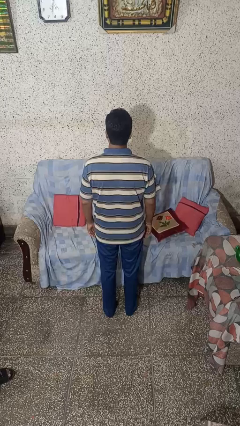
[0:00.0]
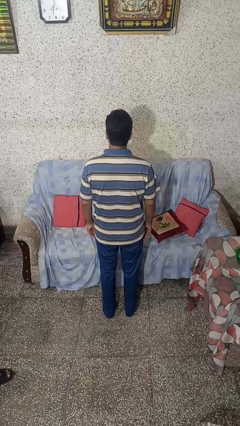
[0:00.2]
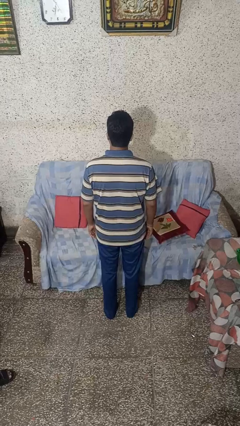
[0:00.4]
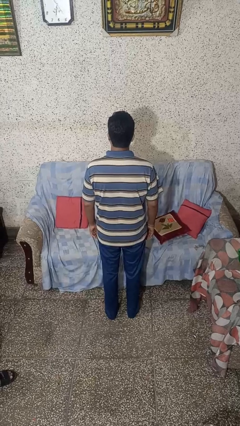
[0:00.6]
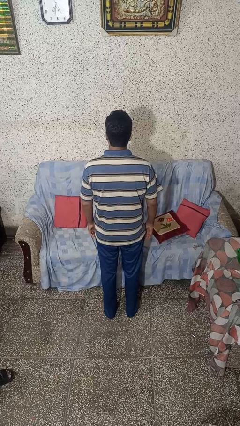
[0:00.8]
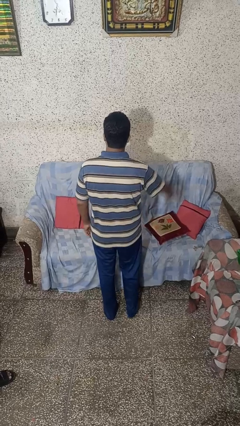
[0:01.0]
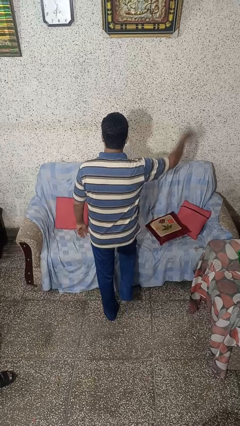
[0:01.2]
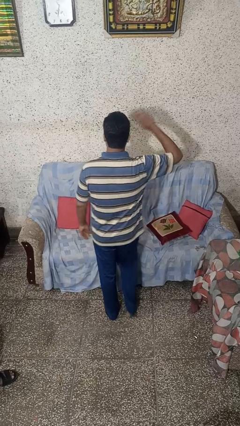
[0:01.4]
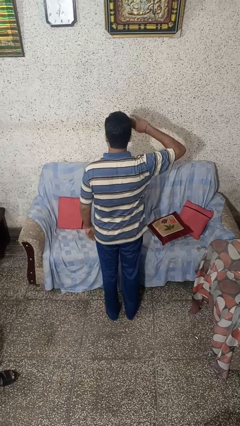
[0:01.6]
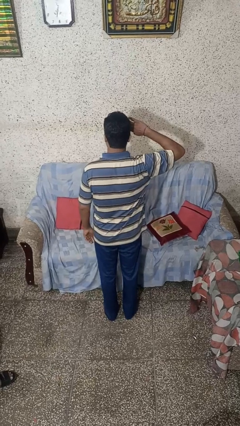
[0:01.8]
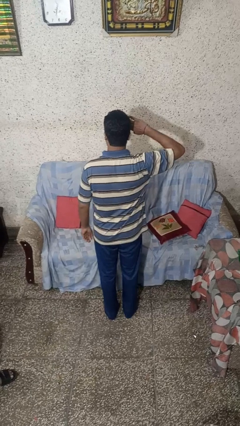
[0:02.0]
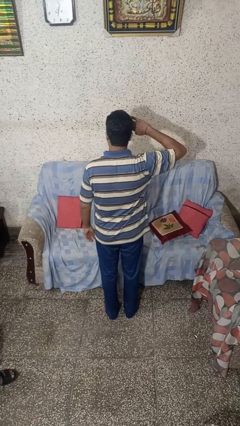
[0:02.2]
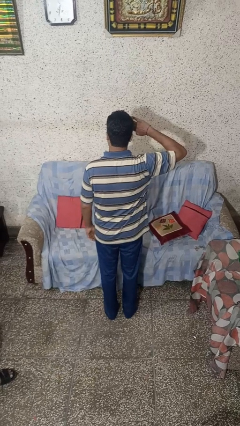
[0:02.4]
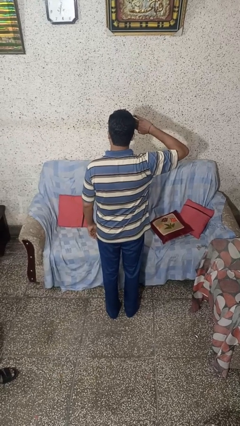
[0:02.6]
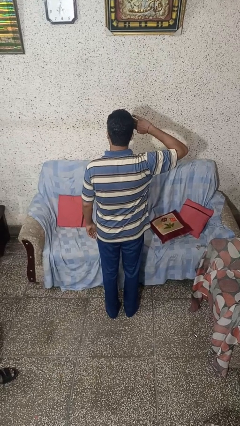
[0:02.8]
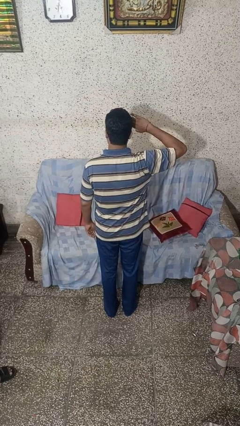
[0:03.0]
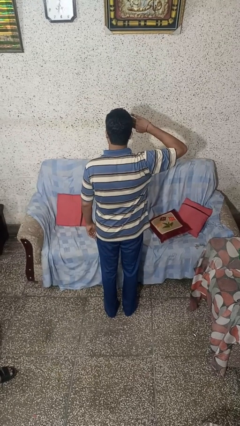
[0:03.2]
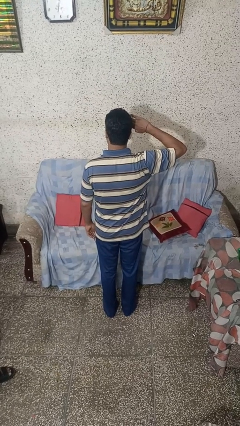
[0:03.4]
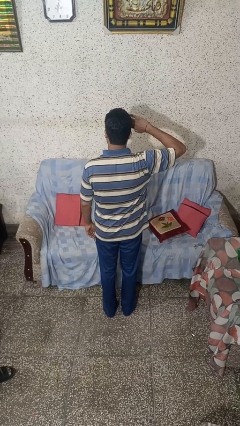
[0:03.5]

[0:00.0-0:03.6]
person salutes

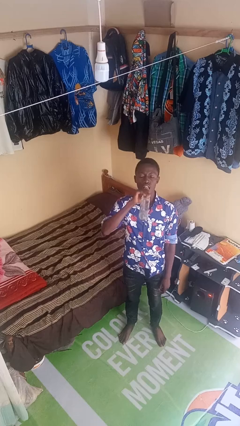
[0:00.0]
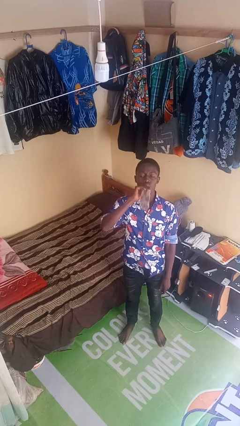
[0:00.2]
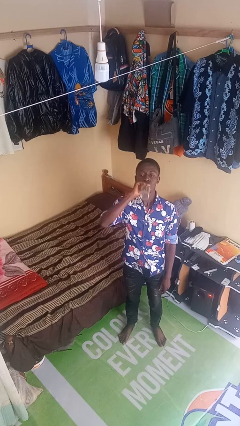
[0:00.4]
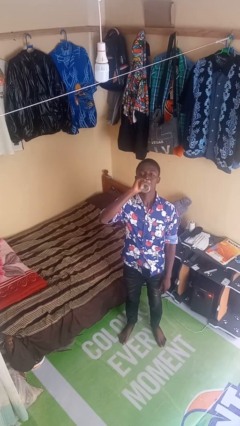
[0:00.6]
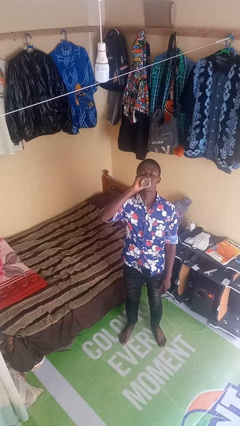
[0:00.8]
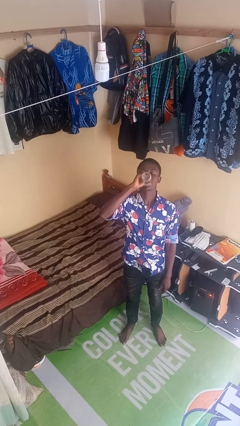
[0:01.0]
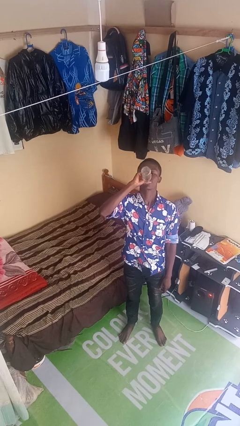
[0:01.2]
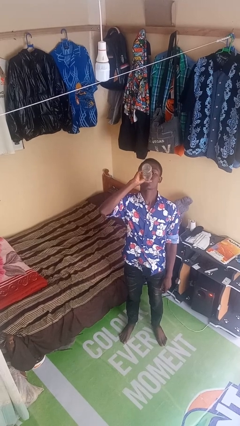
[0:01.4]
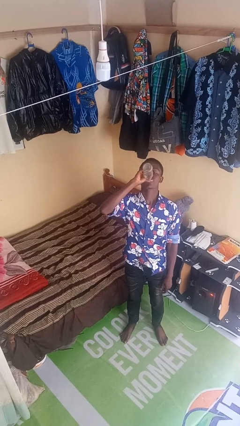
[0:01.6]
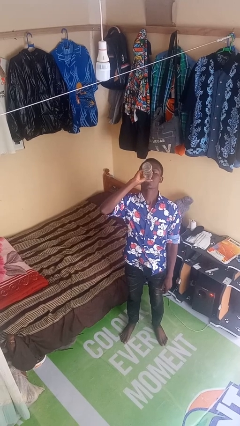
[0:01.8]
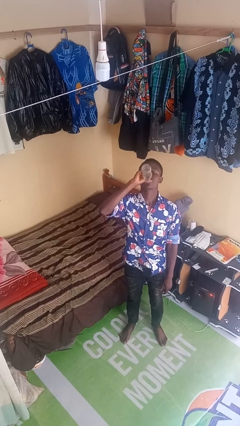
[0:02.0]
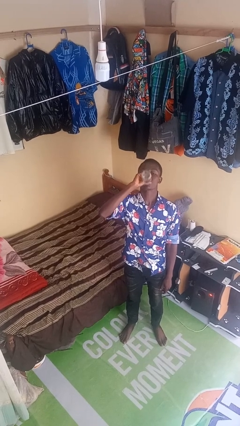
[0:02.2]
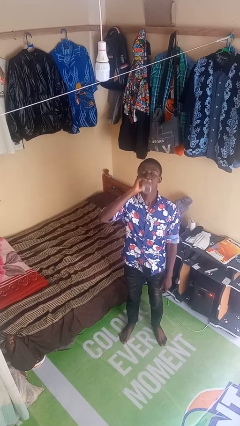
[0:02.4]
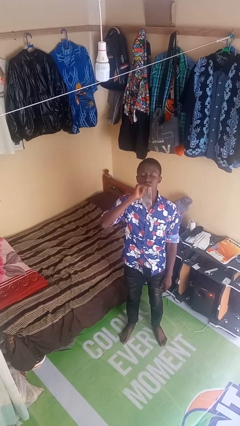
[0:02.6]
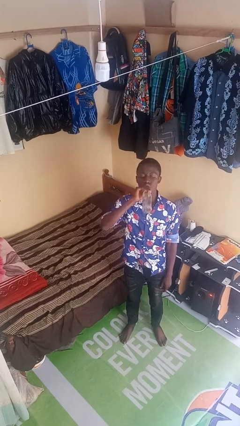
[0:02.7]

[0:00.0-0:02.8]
person drinks from bottle

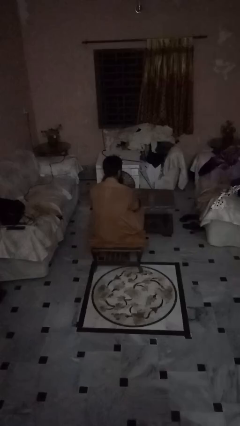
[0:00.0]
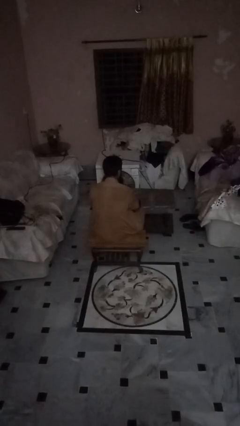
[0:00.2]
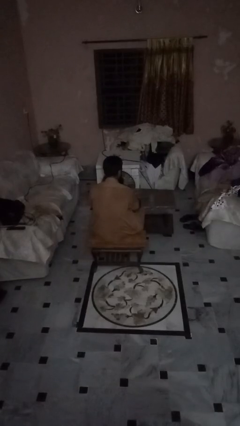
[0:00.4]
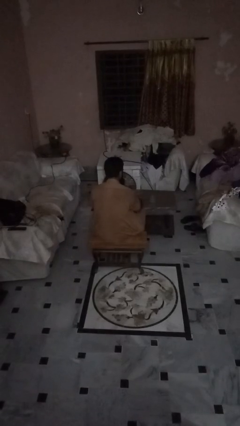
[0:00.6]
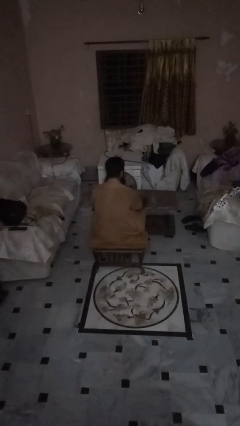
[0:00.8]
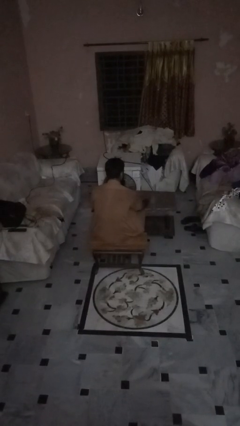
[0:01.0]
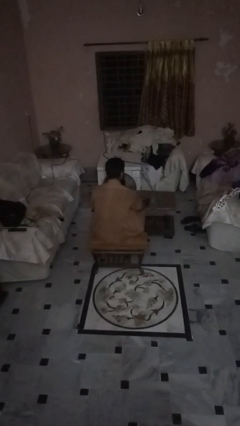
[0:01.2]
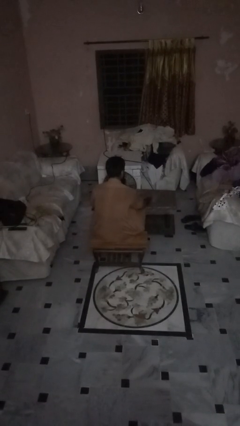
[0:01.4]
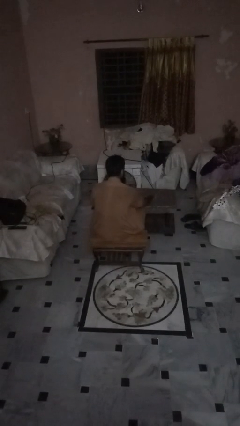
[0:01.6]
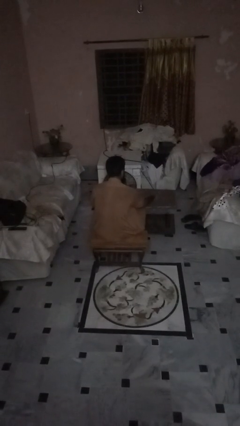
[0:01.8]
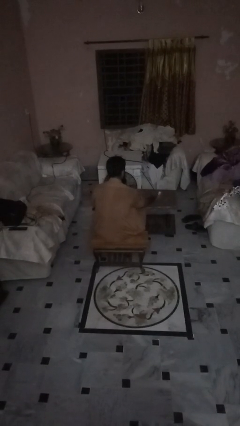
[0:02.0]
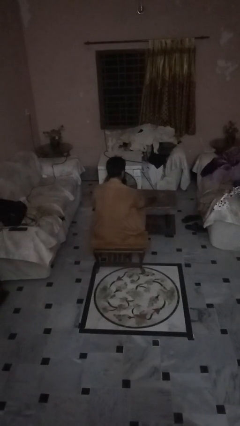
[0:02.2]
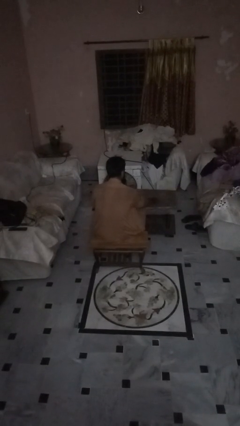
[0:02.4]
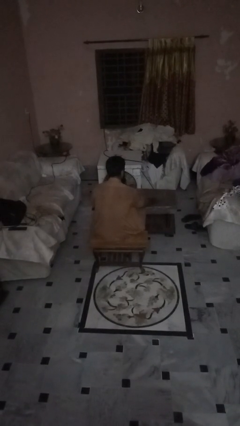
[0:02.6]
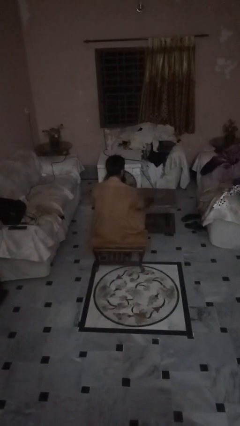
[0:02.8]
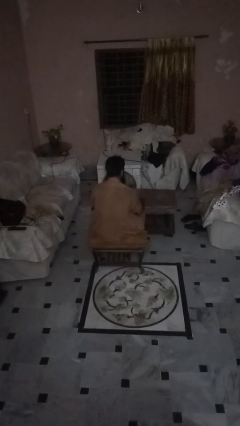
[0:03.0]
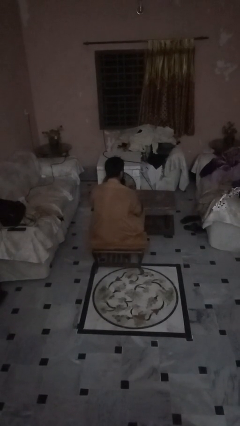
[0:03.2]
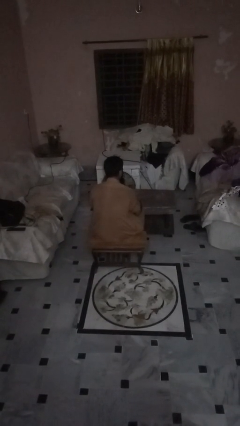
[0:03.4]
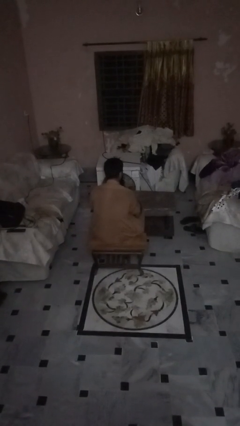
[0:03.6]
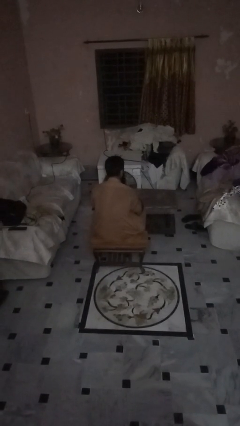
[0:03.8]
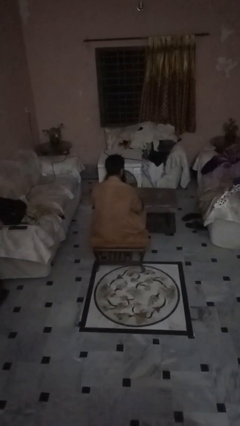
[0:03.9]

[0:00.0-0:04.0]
person knocks over glass

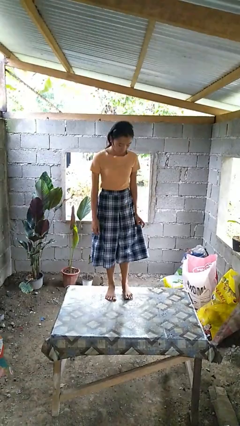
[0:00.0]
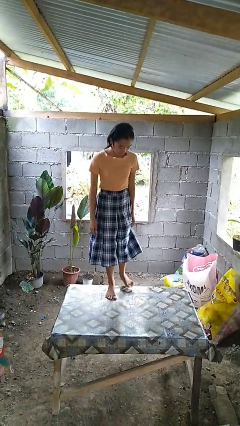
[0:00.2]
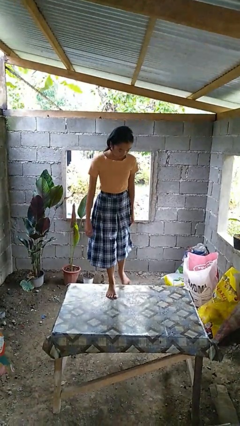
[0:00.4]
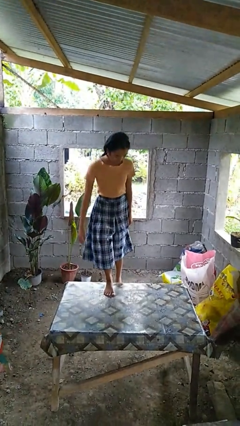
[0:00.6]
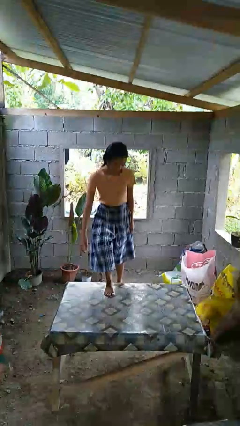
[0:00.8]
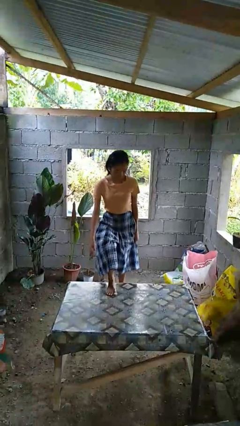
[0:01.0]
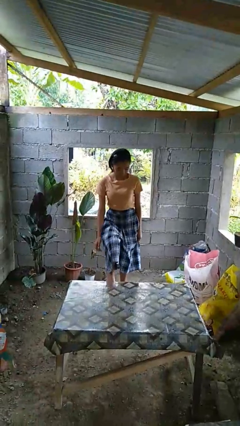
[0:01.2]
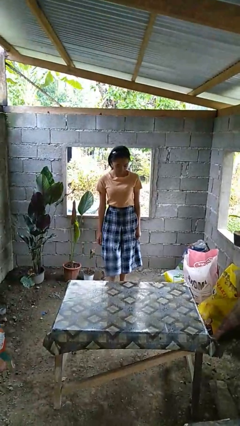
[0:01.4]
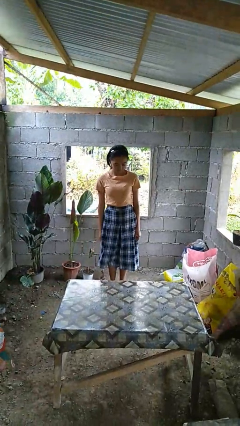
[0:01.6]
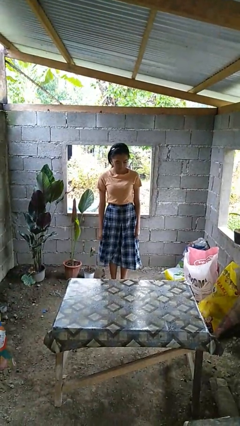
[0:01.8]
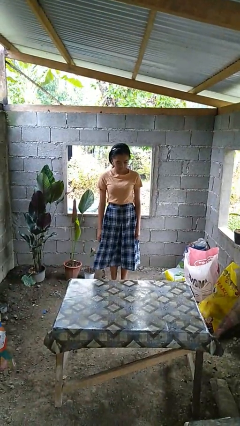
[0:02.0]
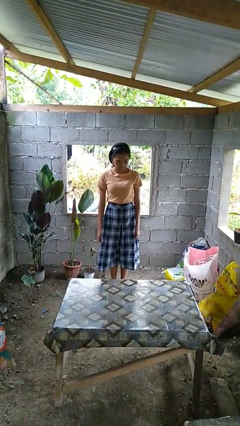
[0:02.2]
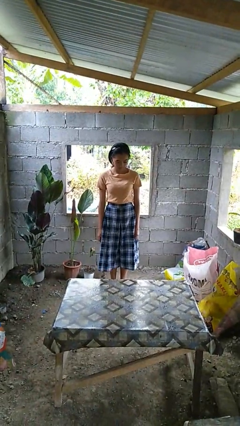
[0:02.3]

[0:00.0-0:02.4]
person climbs off table

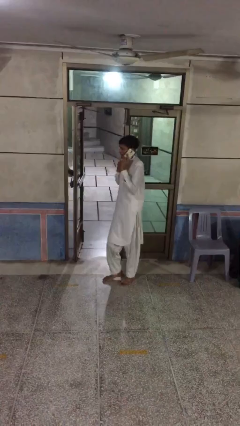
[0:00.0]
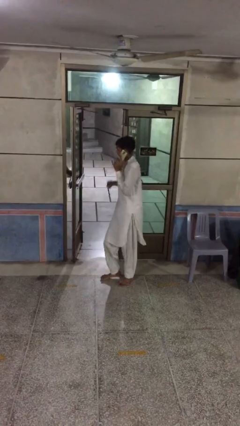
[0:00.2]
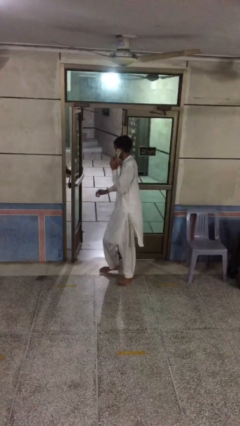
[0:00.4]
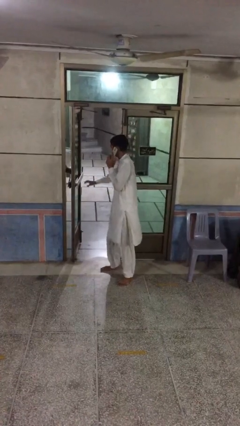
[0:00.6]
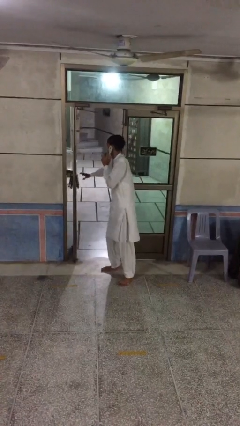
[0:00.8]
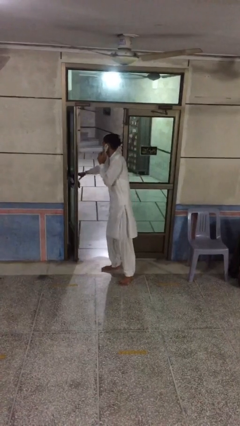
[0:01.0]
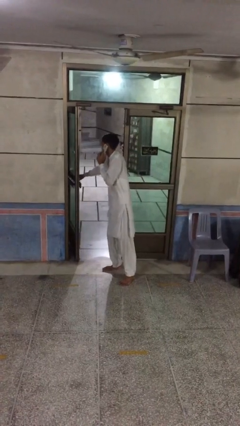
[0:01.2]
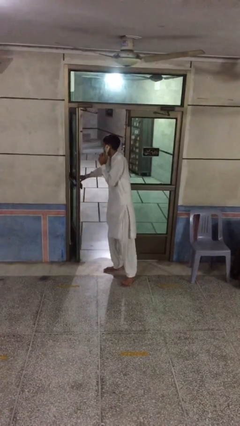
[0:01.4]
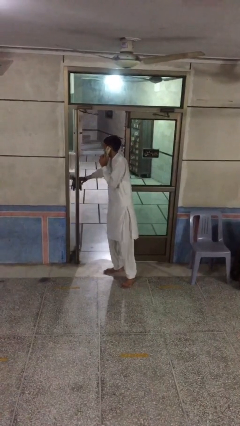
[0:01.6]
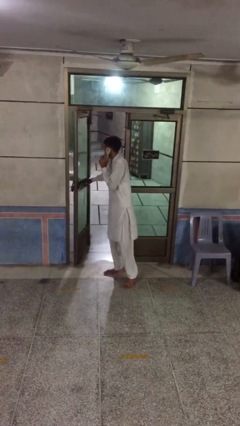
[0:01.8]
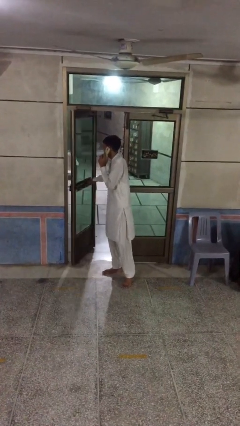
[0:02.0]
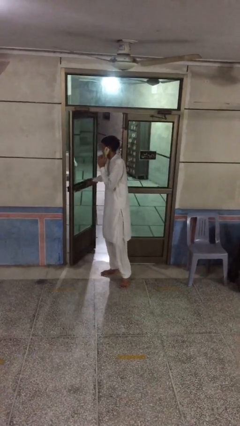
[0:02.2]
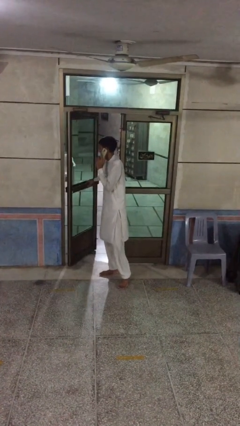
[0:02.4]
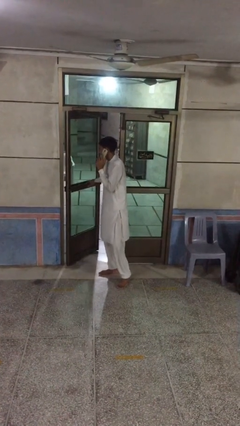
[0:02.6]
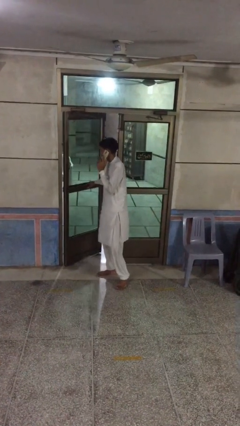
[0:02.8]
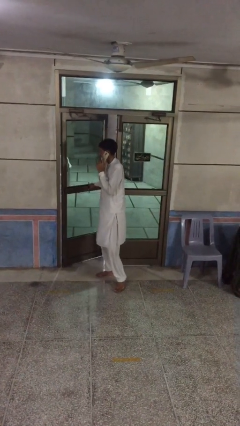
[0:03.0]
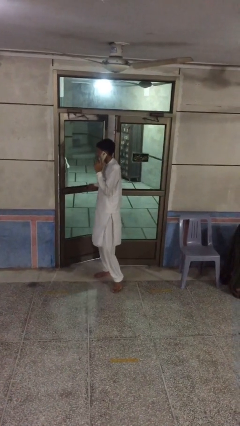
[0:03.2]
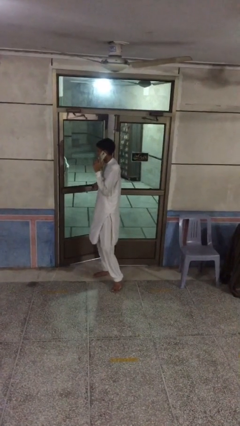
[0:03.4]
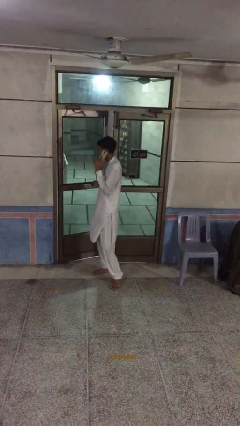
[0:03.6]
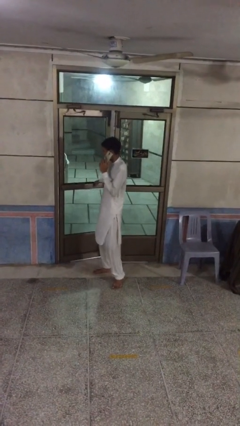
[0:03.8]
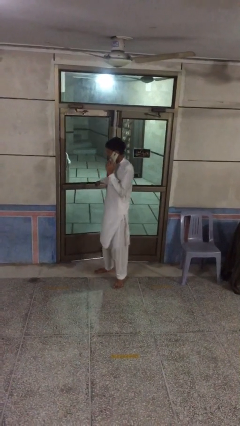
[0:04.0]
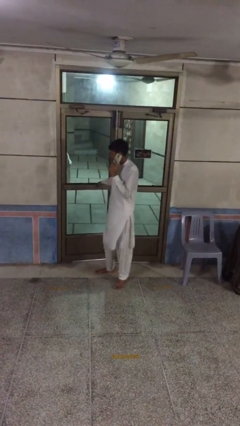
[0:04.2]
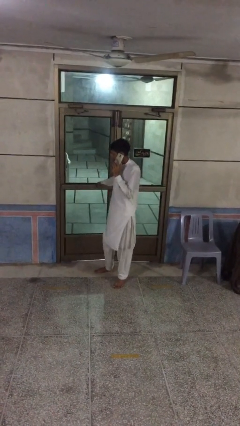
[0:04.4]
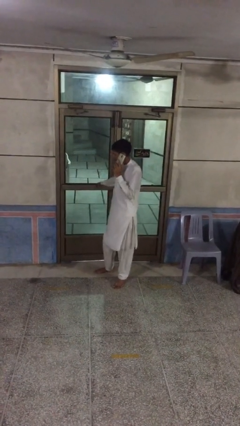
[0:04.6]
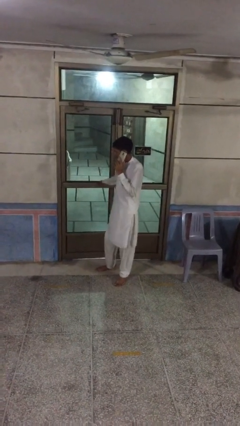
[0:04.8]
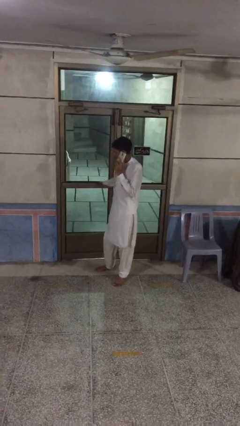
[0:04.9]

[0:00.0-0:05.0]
person closes facility door
